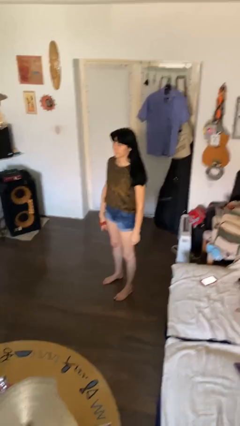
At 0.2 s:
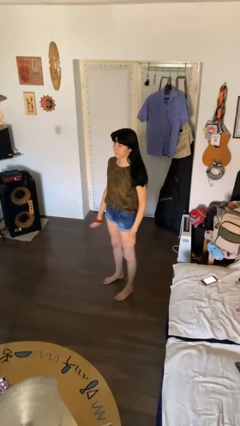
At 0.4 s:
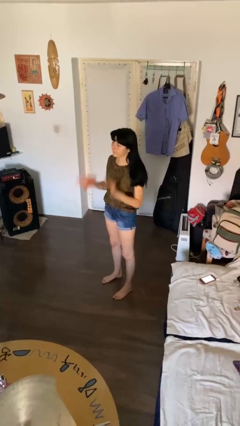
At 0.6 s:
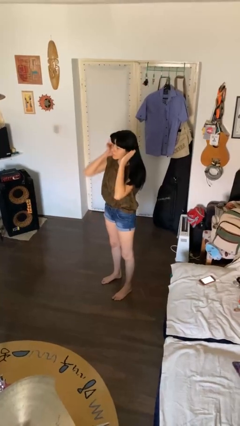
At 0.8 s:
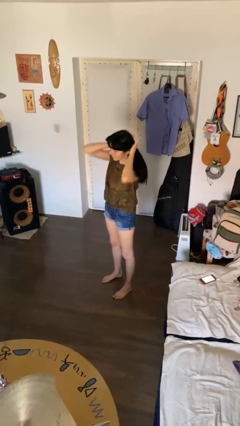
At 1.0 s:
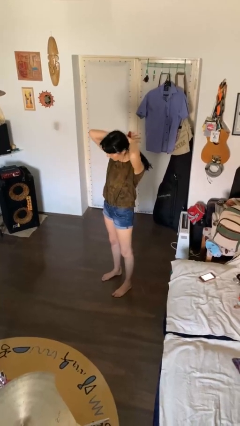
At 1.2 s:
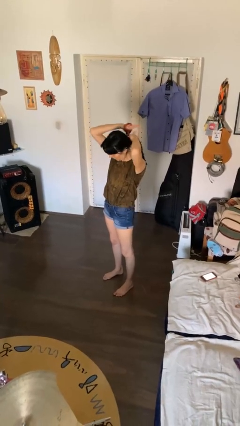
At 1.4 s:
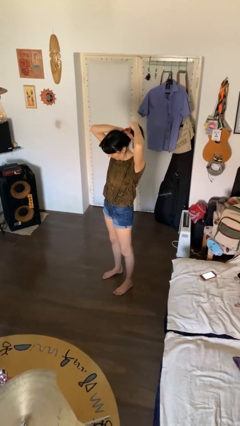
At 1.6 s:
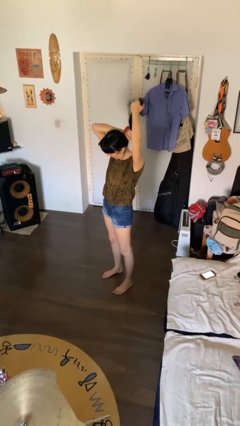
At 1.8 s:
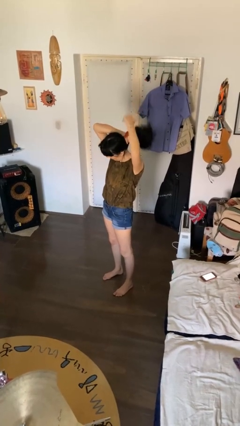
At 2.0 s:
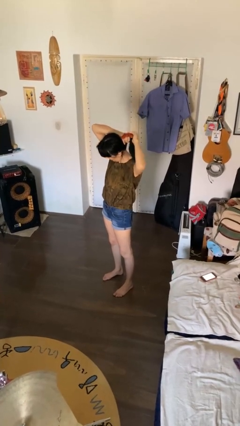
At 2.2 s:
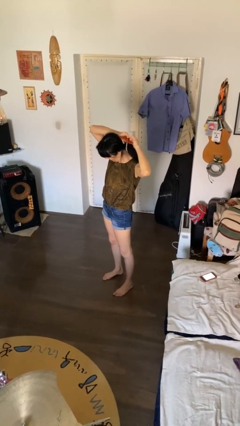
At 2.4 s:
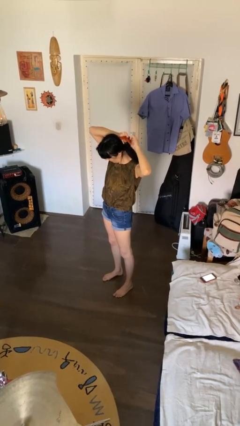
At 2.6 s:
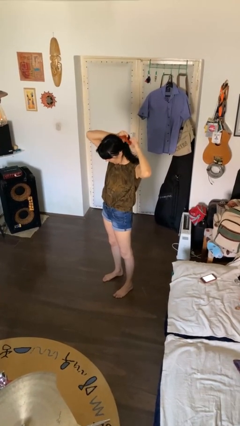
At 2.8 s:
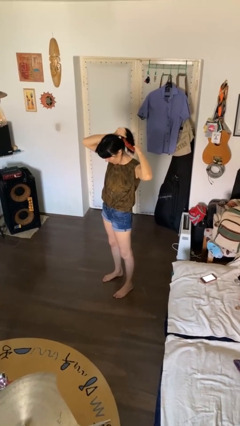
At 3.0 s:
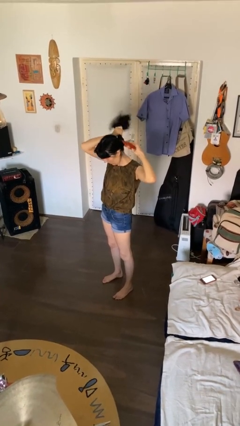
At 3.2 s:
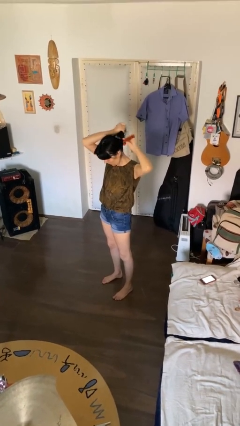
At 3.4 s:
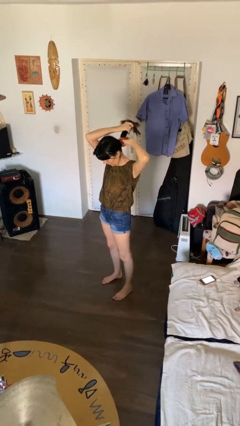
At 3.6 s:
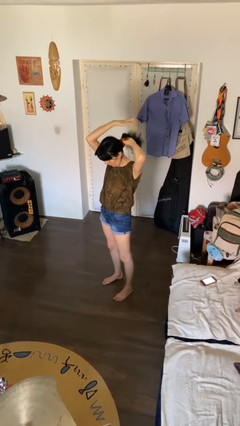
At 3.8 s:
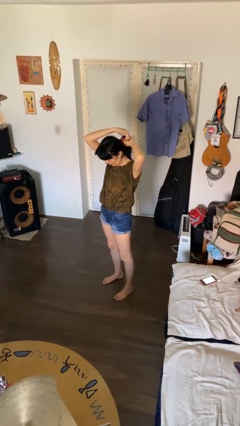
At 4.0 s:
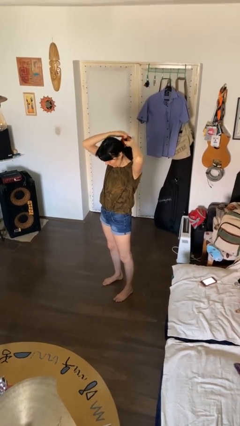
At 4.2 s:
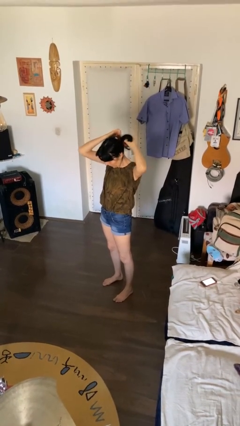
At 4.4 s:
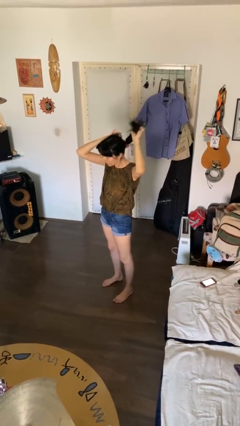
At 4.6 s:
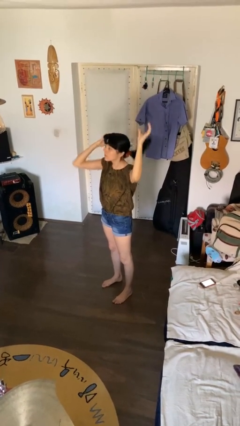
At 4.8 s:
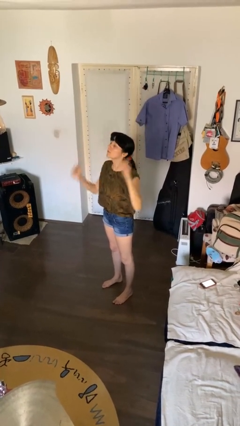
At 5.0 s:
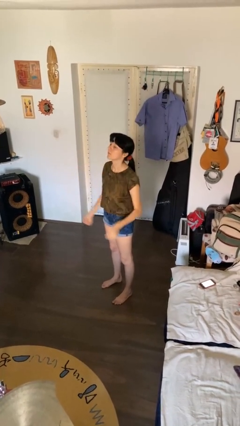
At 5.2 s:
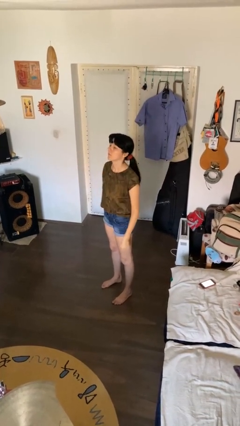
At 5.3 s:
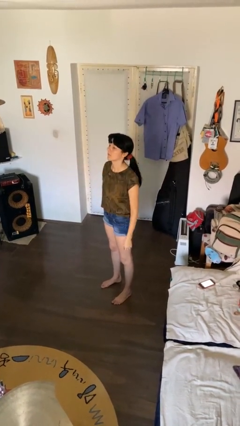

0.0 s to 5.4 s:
person puts hair in ponytail

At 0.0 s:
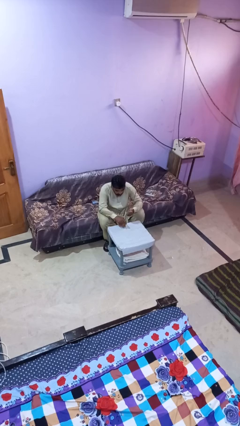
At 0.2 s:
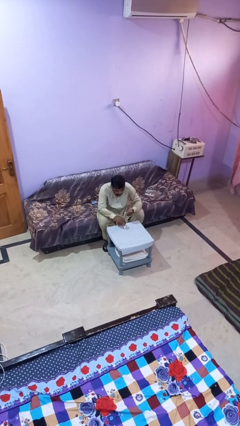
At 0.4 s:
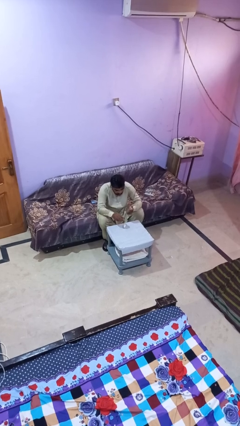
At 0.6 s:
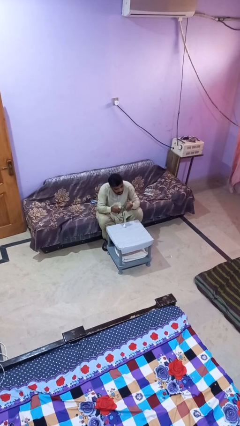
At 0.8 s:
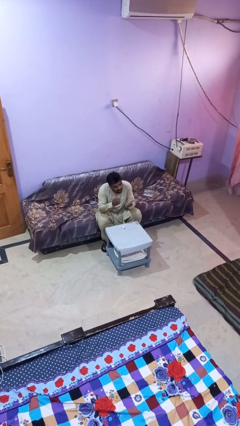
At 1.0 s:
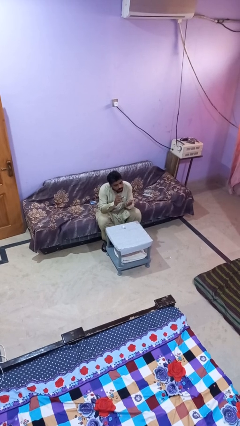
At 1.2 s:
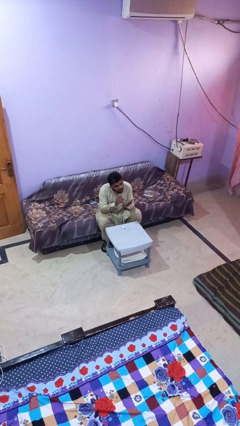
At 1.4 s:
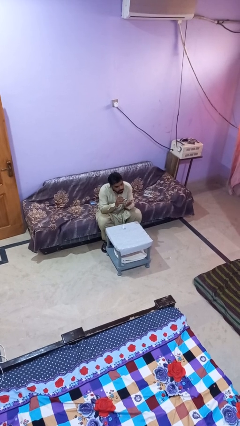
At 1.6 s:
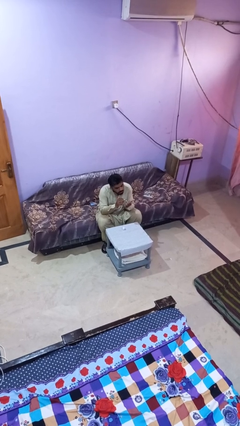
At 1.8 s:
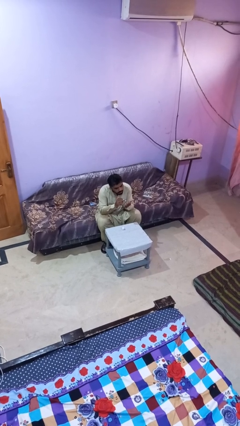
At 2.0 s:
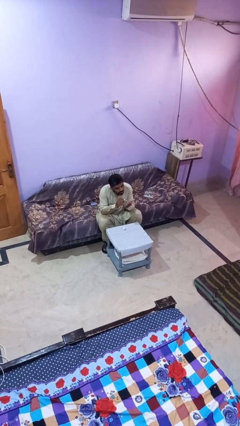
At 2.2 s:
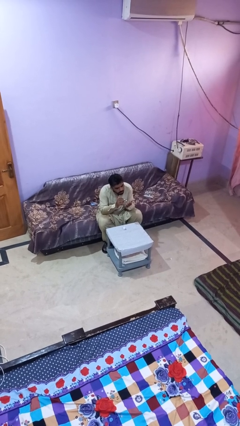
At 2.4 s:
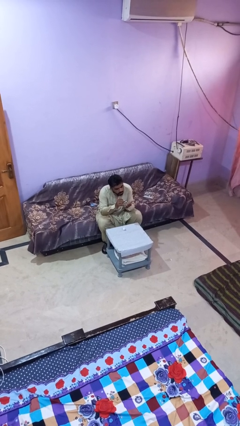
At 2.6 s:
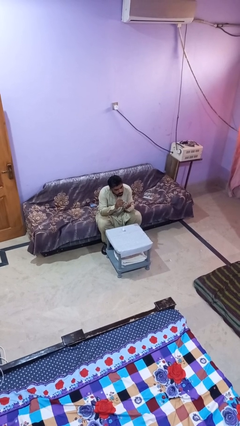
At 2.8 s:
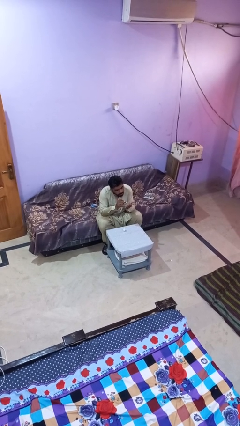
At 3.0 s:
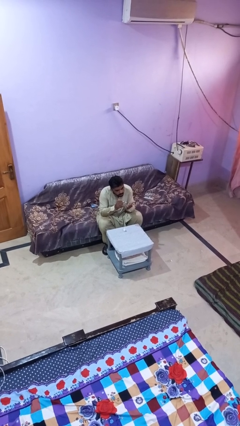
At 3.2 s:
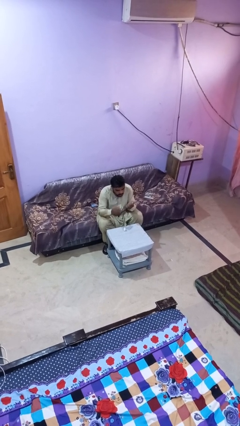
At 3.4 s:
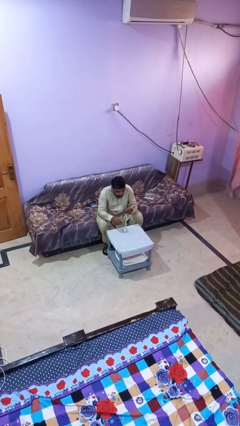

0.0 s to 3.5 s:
person paints fingernails

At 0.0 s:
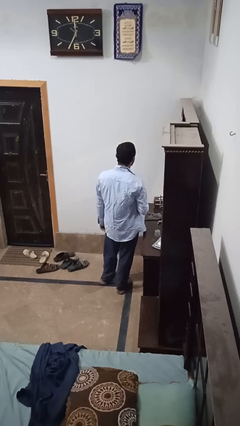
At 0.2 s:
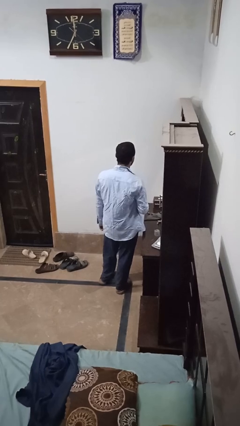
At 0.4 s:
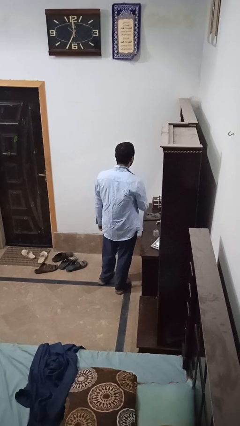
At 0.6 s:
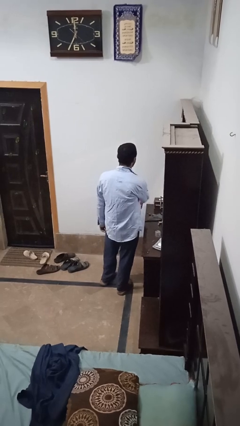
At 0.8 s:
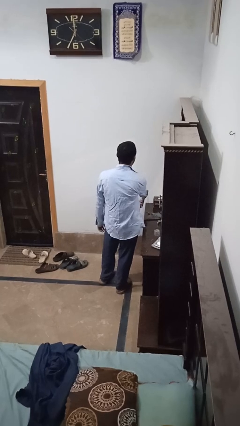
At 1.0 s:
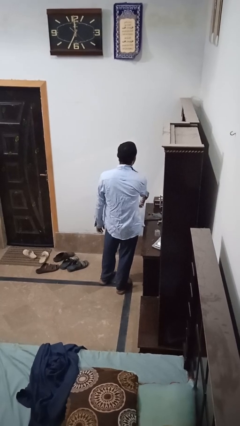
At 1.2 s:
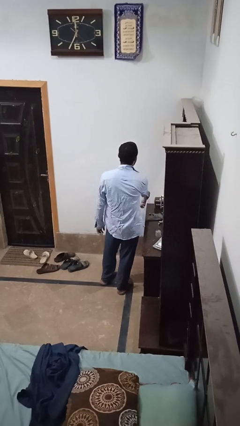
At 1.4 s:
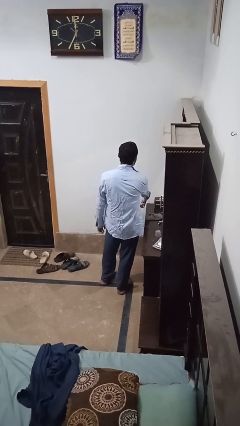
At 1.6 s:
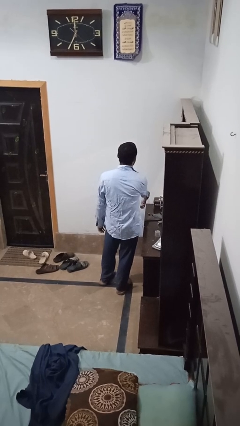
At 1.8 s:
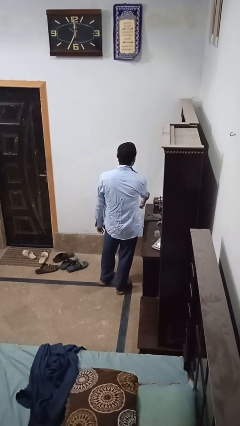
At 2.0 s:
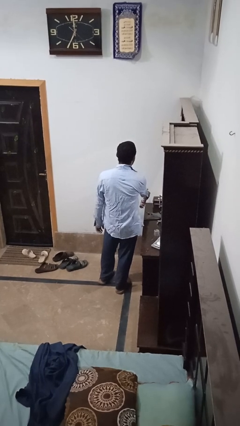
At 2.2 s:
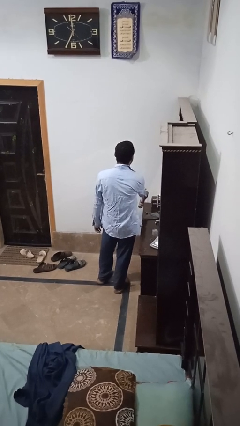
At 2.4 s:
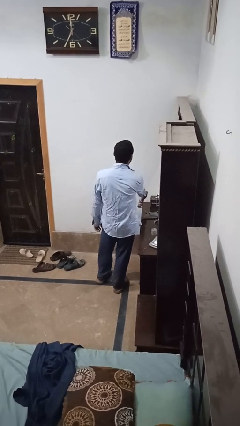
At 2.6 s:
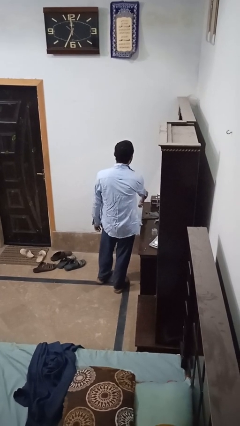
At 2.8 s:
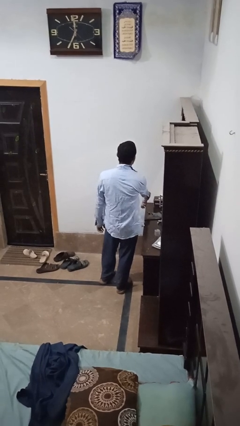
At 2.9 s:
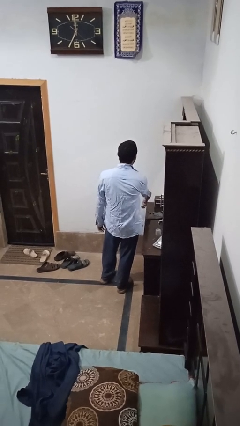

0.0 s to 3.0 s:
person sprays from bottle

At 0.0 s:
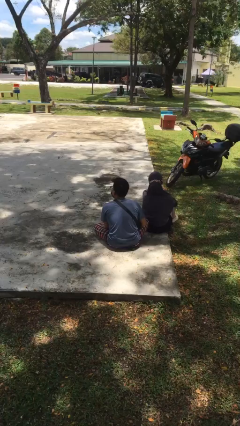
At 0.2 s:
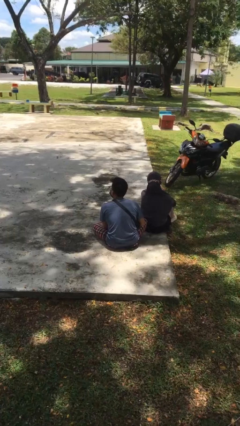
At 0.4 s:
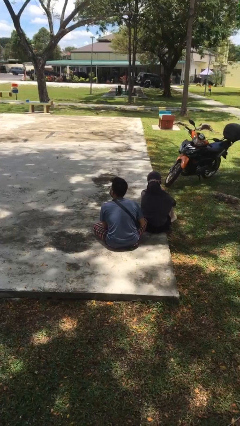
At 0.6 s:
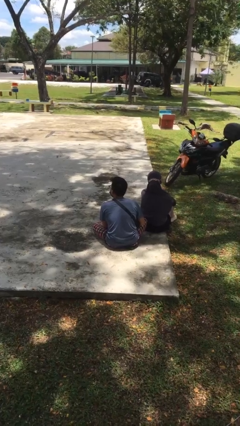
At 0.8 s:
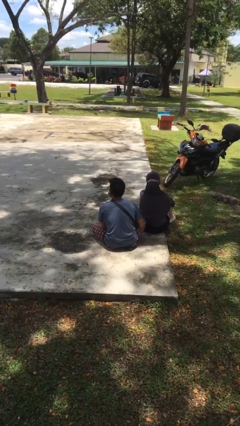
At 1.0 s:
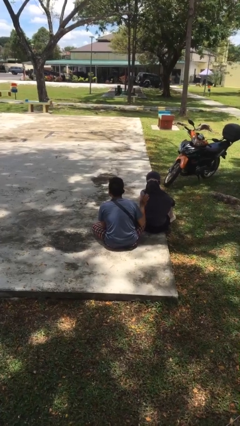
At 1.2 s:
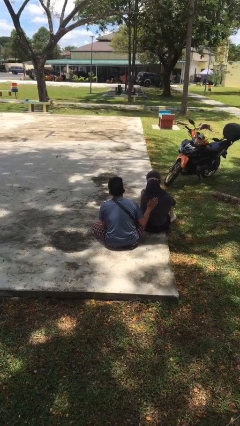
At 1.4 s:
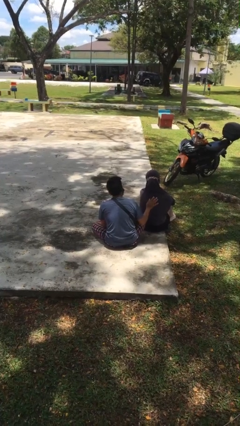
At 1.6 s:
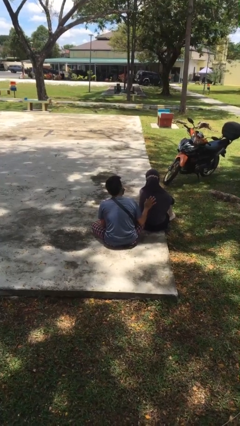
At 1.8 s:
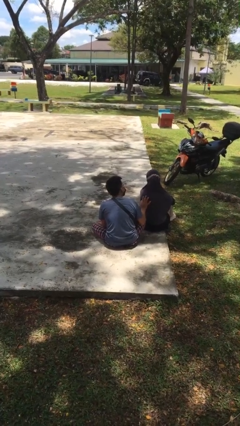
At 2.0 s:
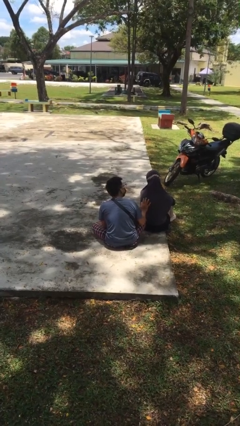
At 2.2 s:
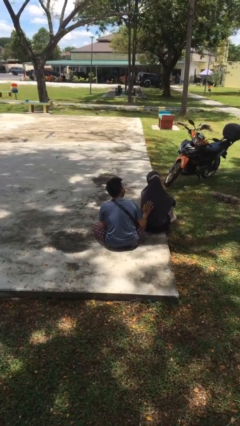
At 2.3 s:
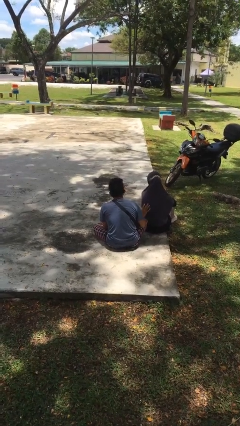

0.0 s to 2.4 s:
person touches back of person

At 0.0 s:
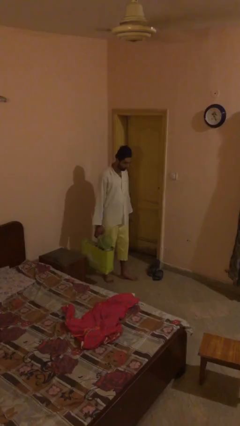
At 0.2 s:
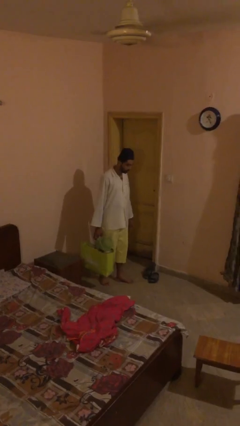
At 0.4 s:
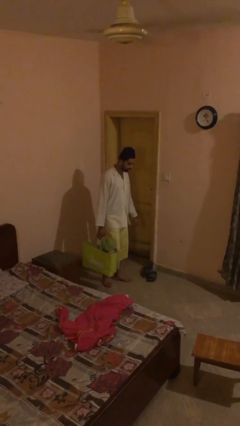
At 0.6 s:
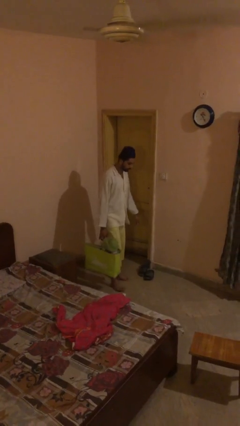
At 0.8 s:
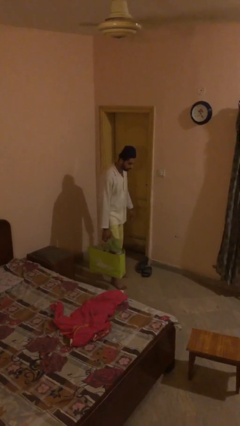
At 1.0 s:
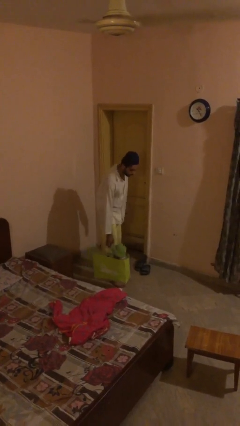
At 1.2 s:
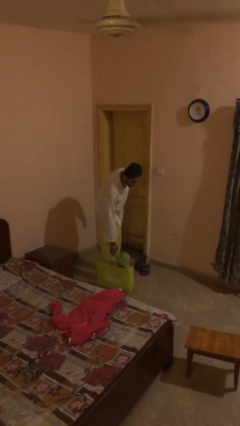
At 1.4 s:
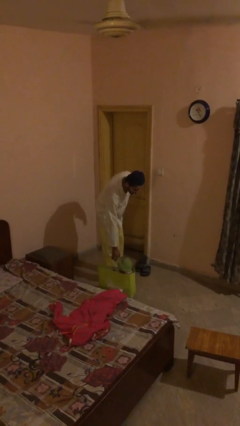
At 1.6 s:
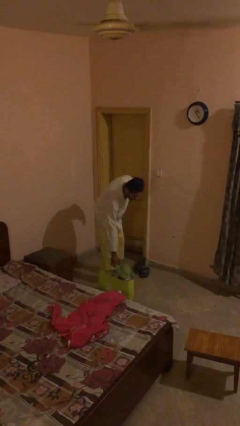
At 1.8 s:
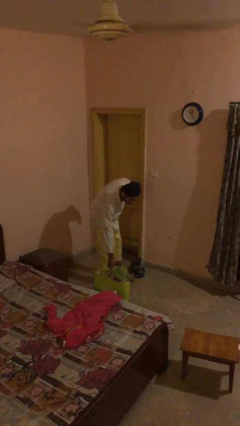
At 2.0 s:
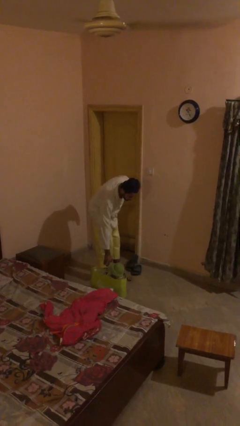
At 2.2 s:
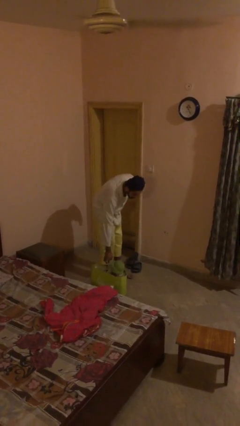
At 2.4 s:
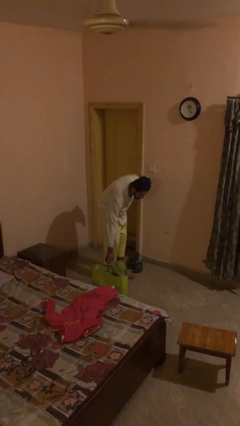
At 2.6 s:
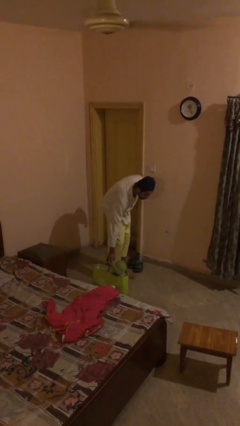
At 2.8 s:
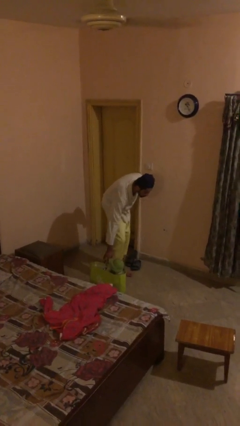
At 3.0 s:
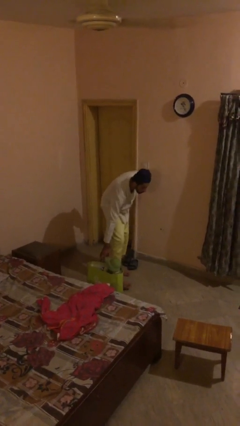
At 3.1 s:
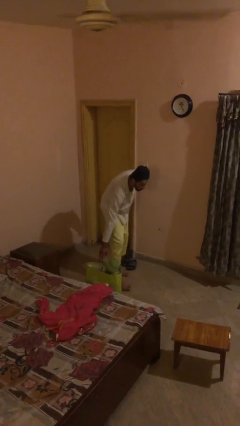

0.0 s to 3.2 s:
person puts down object on floor
